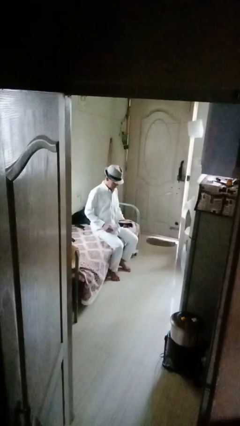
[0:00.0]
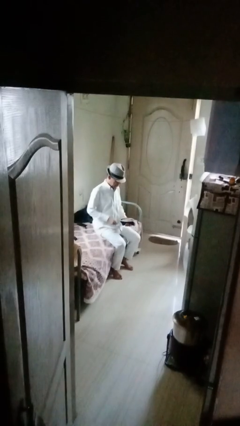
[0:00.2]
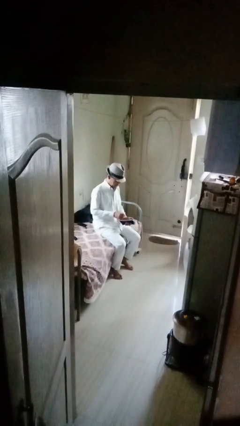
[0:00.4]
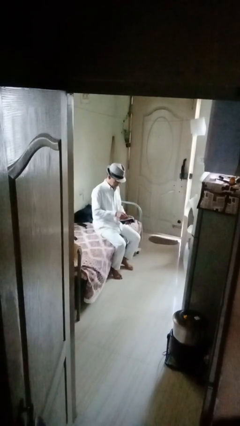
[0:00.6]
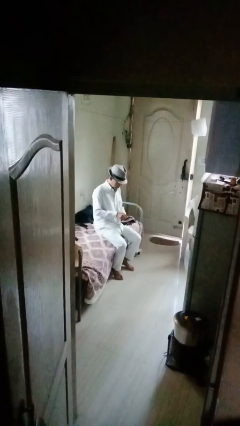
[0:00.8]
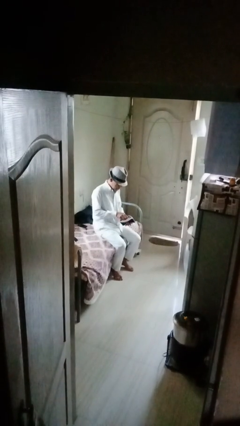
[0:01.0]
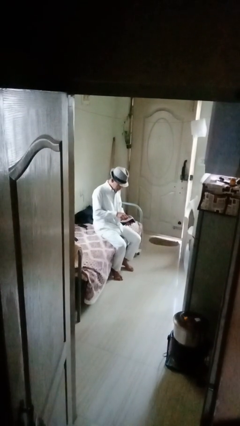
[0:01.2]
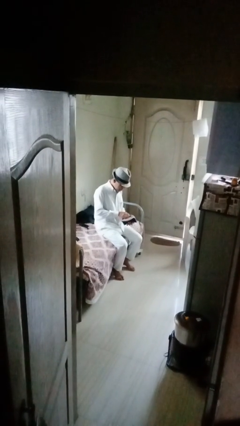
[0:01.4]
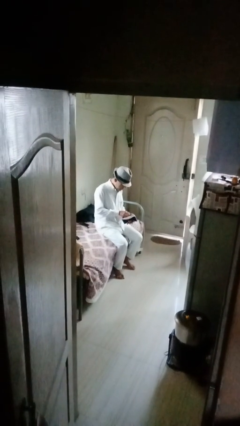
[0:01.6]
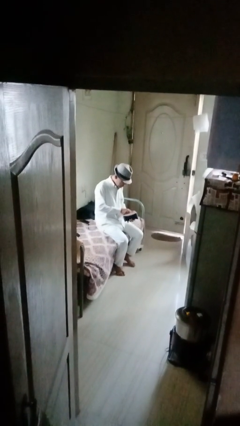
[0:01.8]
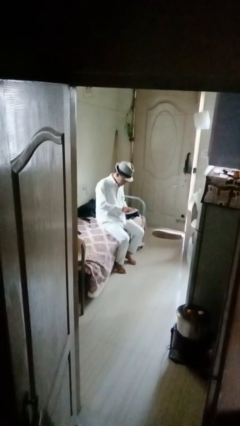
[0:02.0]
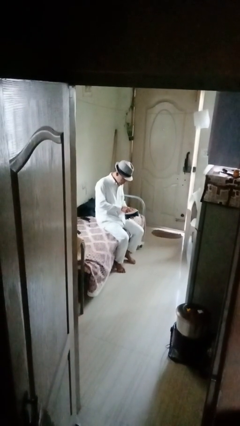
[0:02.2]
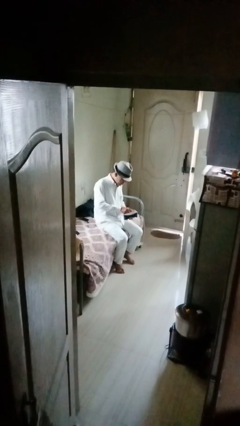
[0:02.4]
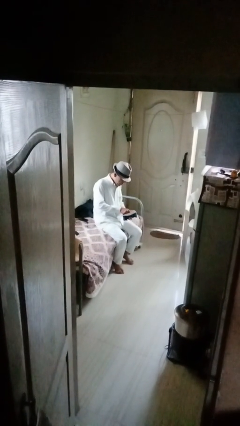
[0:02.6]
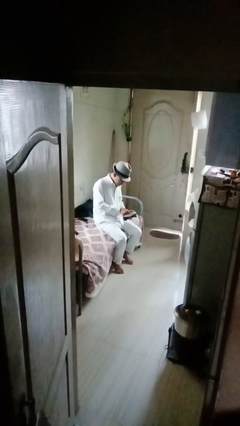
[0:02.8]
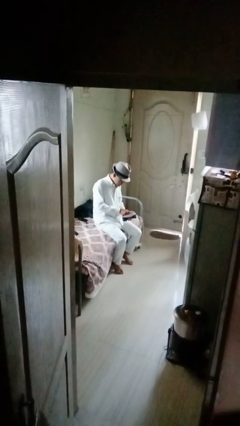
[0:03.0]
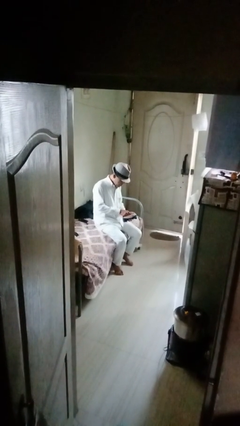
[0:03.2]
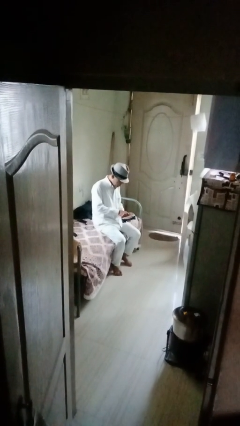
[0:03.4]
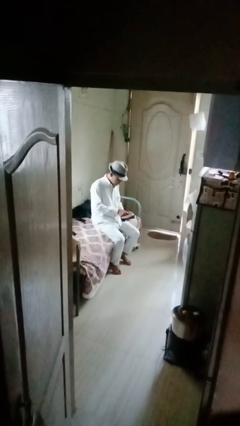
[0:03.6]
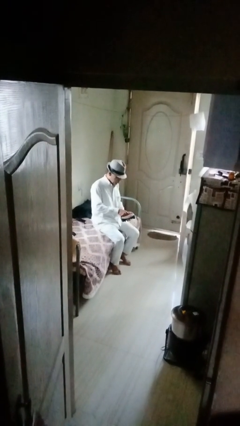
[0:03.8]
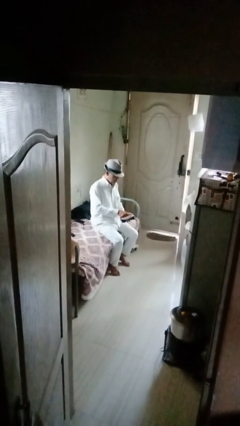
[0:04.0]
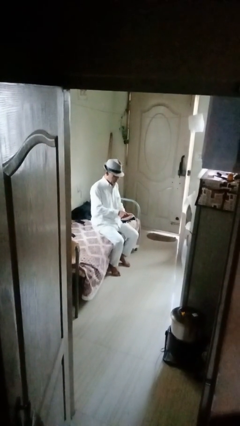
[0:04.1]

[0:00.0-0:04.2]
person searches in purse

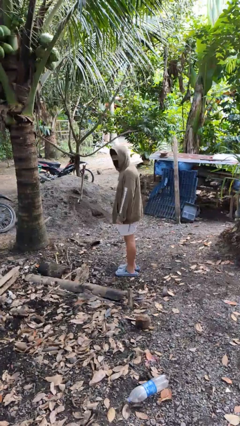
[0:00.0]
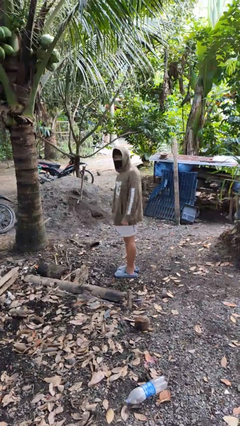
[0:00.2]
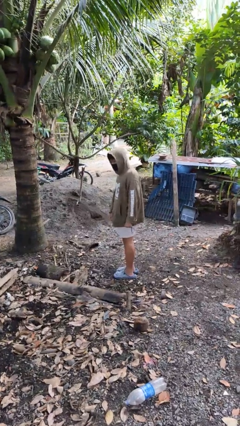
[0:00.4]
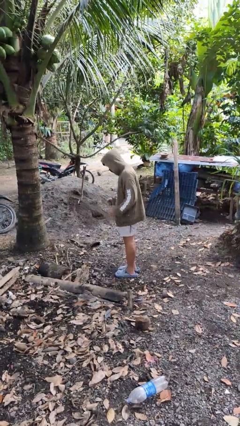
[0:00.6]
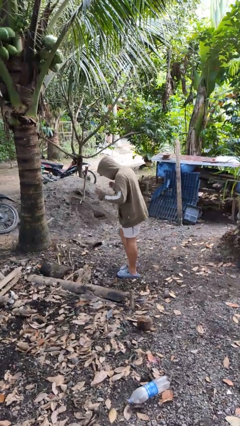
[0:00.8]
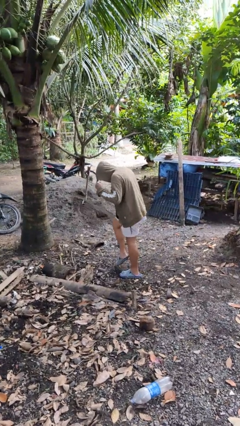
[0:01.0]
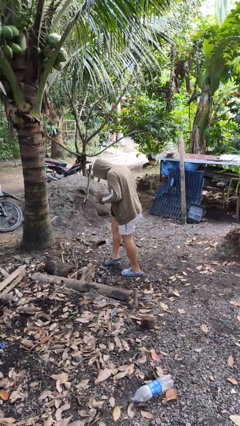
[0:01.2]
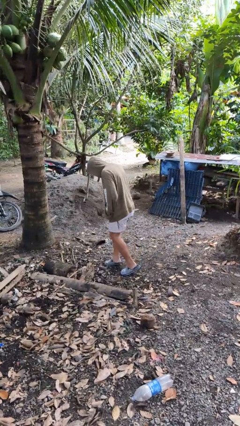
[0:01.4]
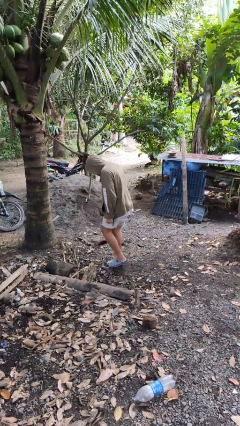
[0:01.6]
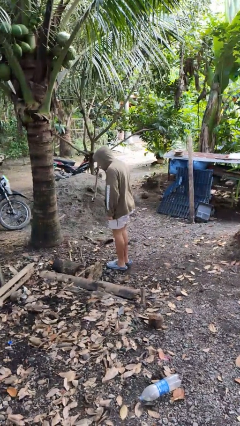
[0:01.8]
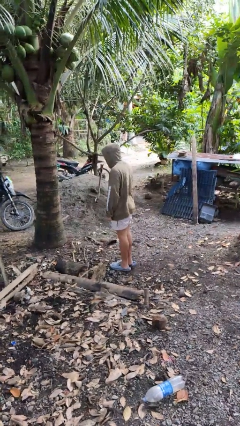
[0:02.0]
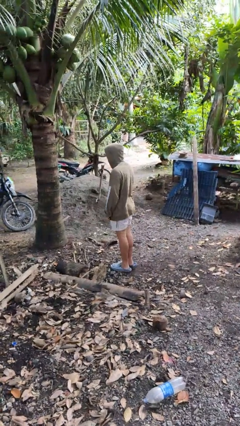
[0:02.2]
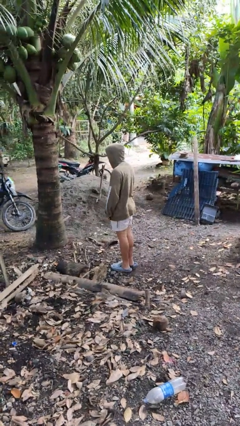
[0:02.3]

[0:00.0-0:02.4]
person walks tiptoe

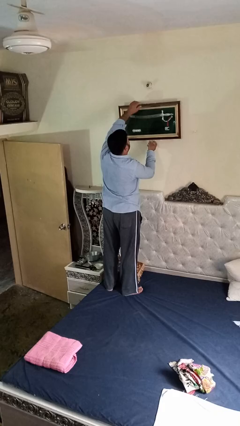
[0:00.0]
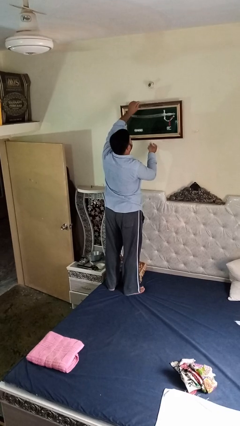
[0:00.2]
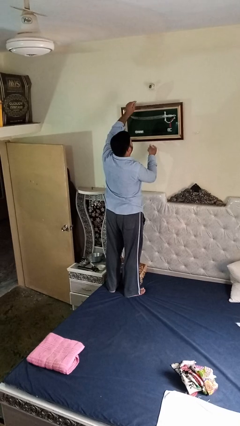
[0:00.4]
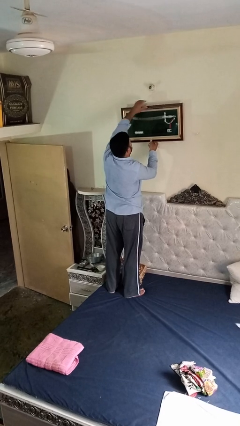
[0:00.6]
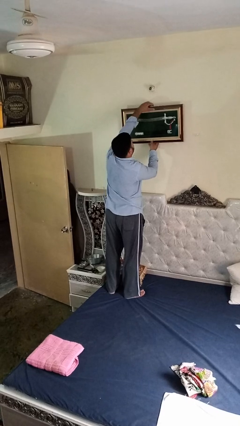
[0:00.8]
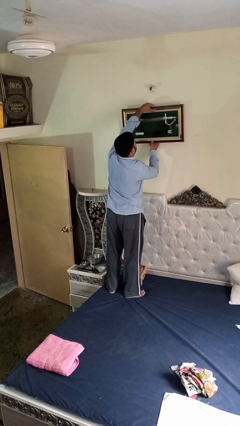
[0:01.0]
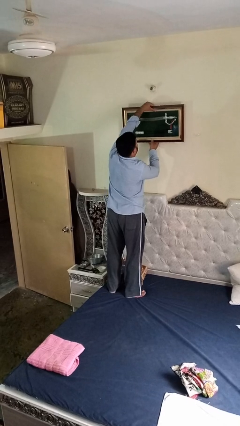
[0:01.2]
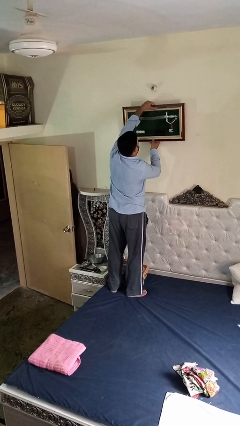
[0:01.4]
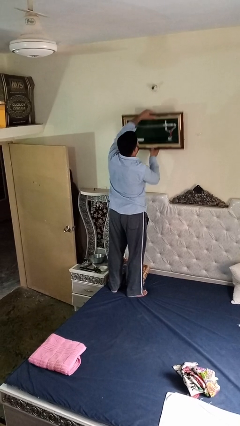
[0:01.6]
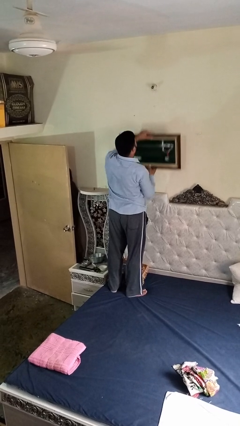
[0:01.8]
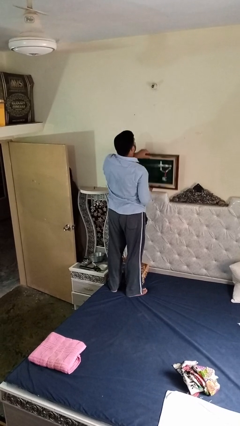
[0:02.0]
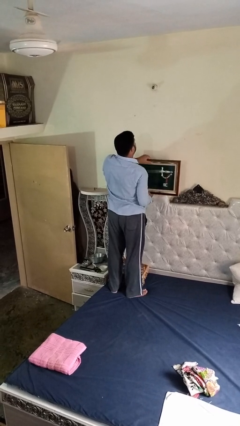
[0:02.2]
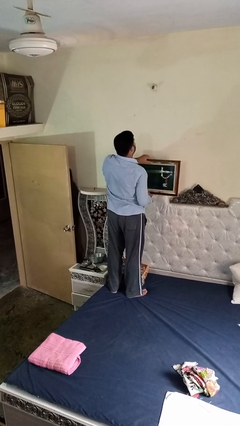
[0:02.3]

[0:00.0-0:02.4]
person takes down picture frame

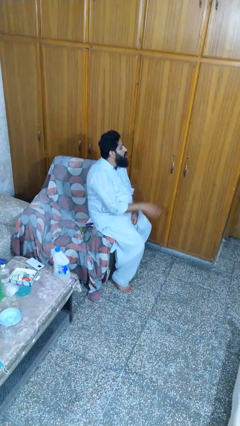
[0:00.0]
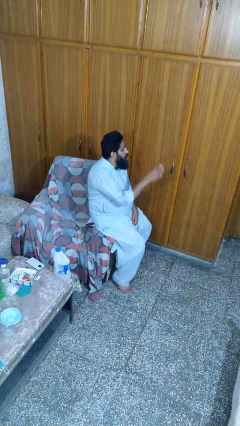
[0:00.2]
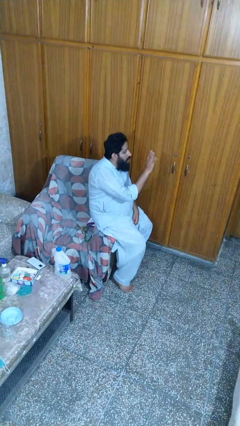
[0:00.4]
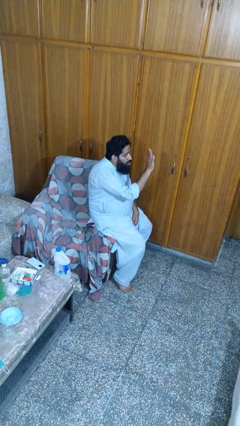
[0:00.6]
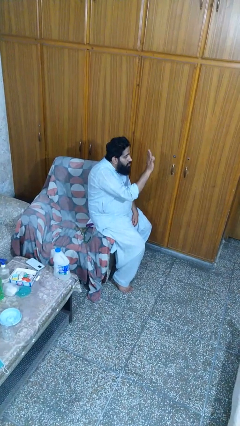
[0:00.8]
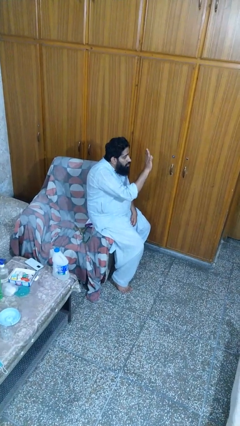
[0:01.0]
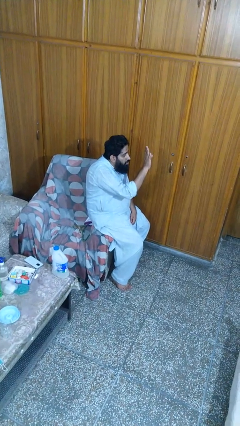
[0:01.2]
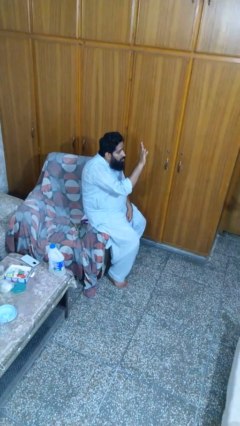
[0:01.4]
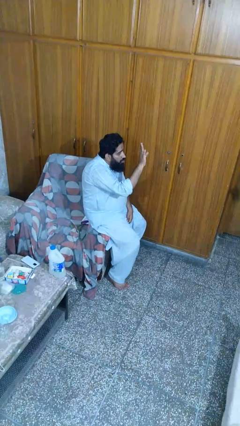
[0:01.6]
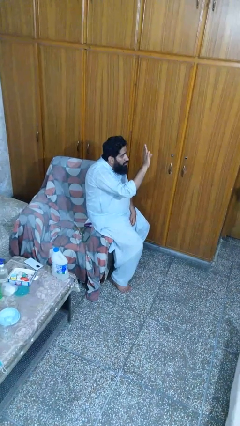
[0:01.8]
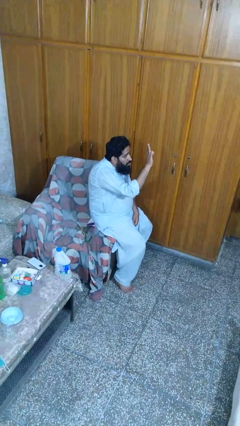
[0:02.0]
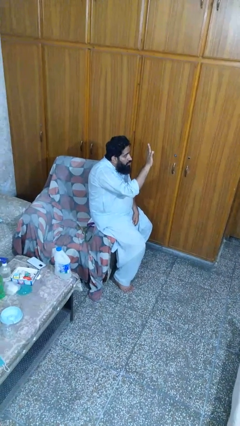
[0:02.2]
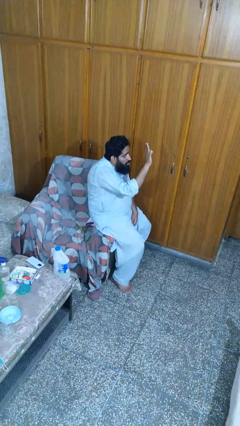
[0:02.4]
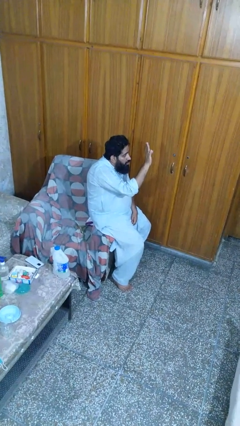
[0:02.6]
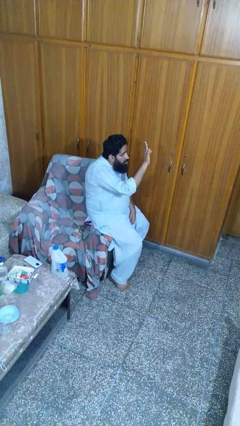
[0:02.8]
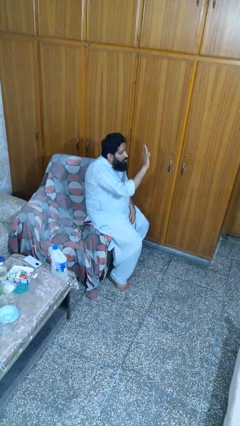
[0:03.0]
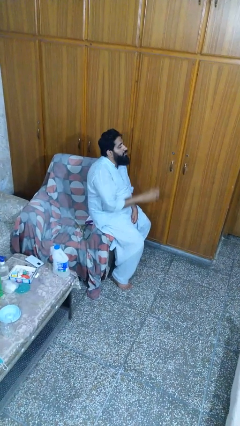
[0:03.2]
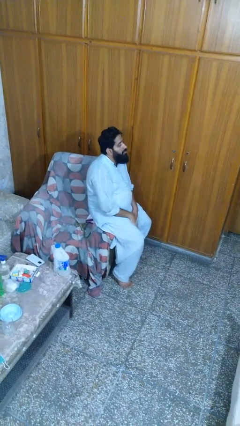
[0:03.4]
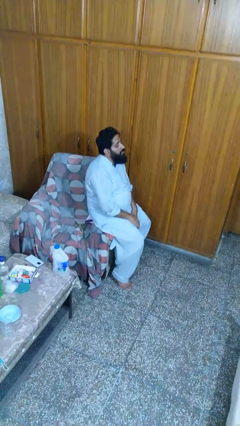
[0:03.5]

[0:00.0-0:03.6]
person waves at person

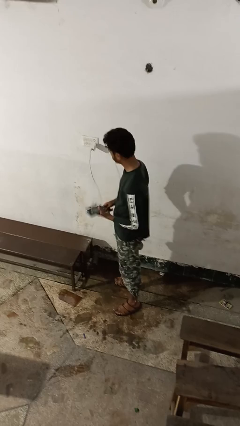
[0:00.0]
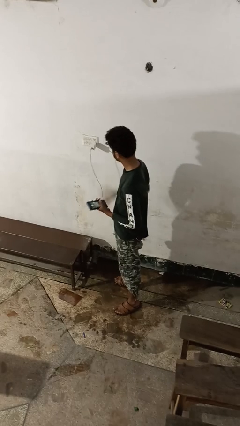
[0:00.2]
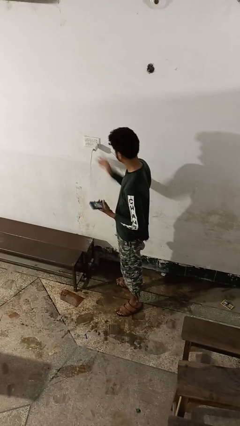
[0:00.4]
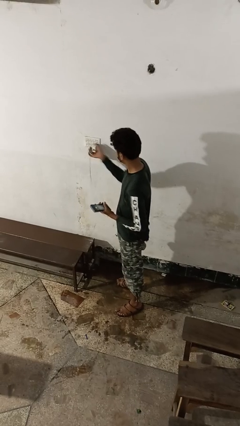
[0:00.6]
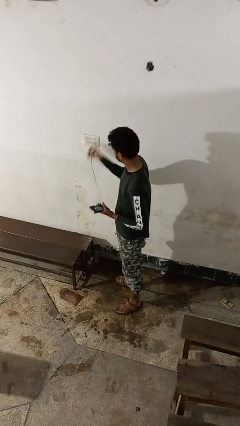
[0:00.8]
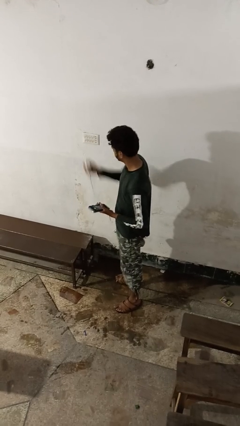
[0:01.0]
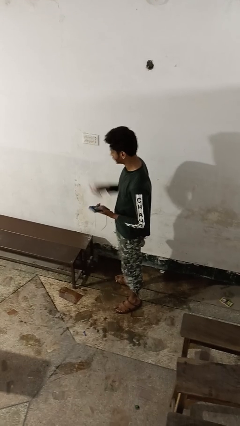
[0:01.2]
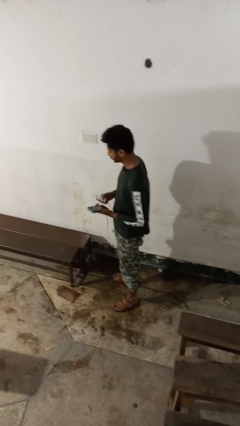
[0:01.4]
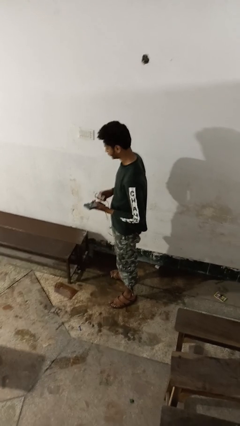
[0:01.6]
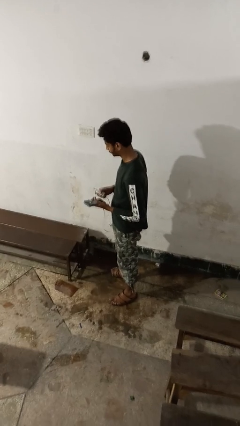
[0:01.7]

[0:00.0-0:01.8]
person unplugs from electrical socket

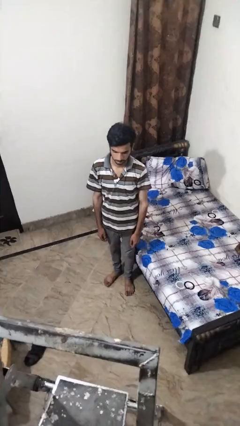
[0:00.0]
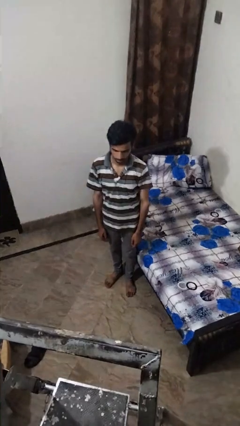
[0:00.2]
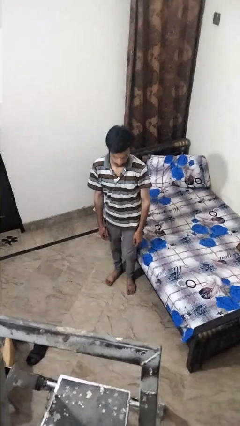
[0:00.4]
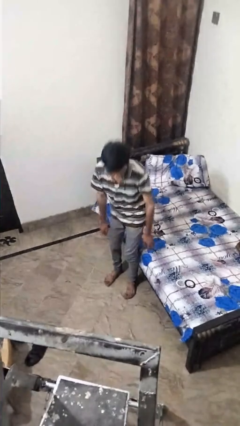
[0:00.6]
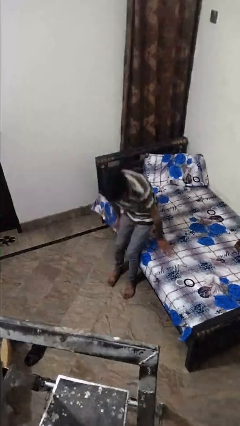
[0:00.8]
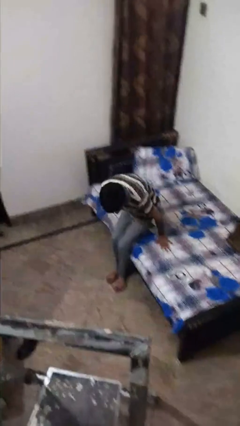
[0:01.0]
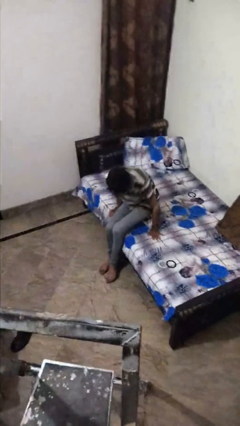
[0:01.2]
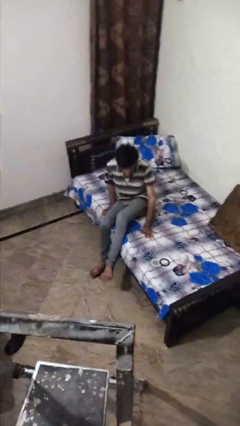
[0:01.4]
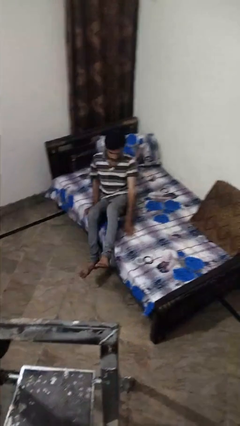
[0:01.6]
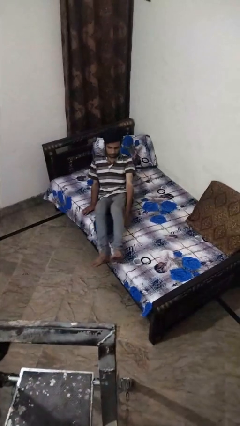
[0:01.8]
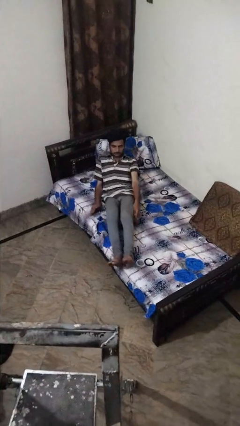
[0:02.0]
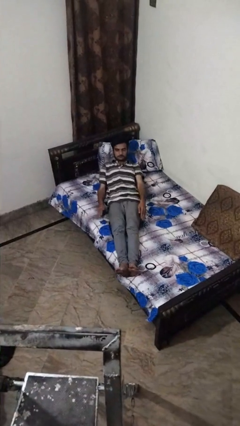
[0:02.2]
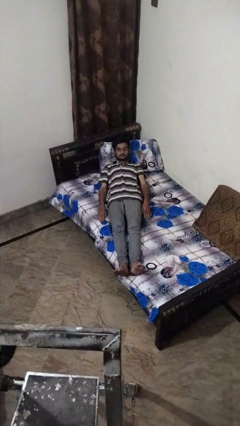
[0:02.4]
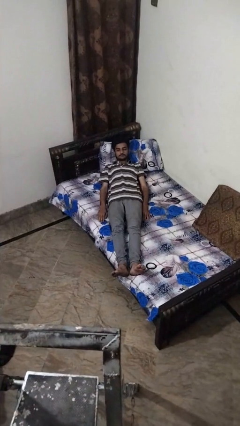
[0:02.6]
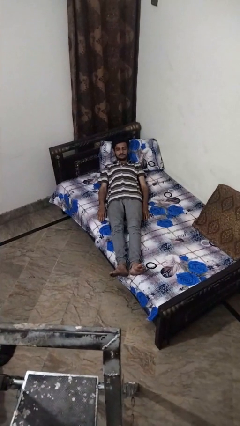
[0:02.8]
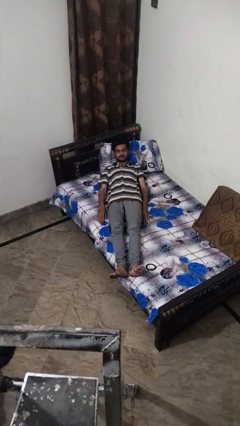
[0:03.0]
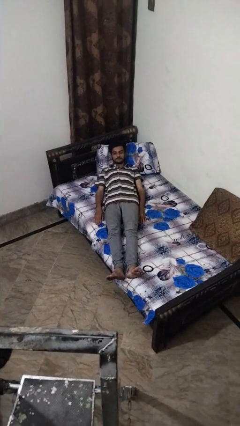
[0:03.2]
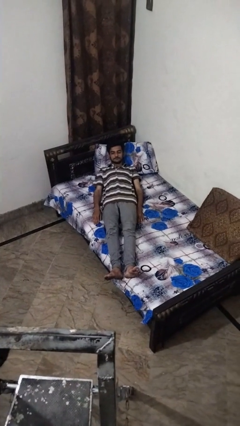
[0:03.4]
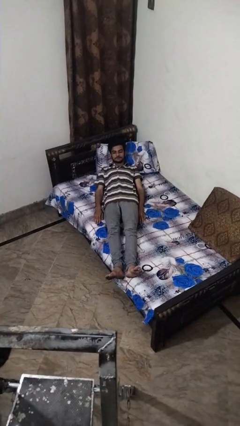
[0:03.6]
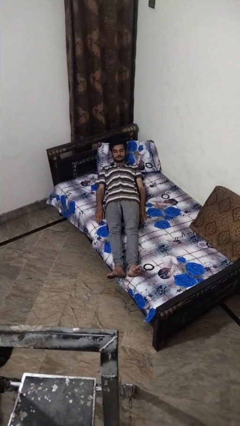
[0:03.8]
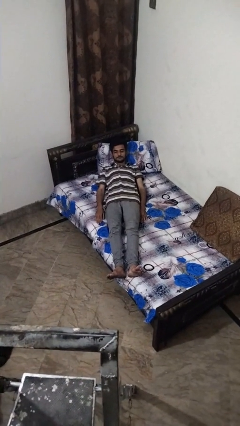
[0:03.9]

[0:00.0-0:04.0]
person lies down on bed
